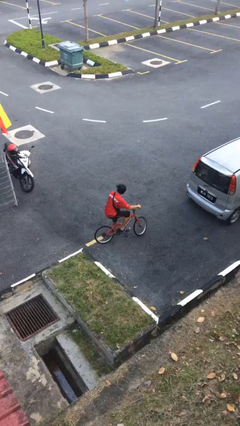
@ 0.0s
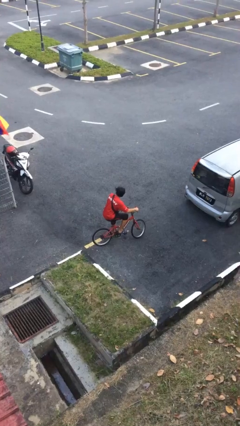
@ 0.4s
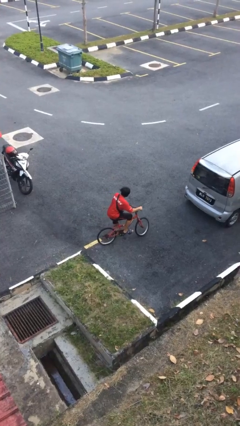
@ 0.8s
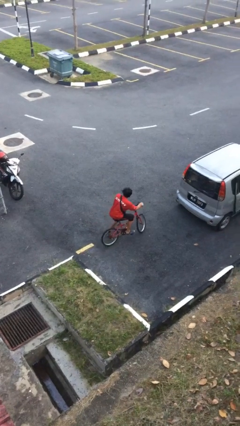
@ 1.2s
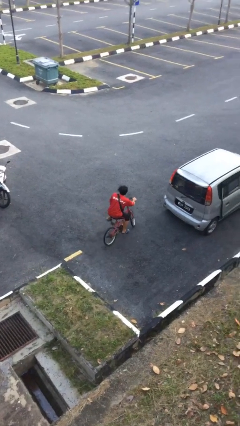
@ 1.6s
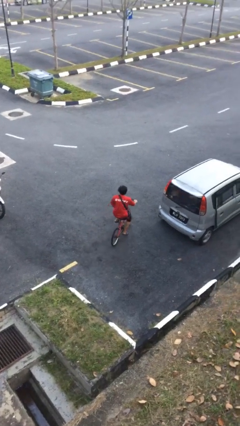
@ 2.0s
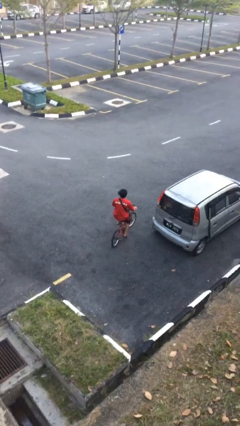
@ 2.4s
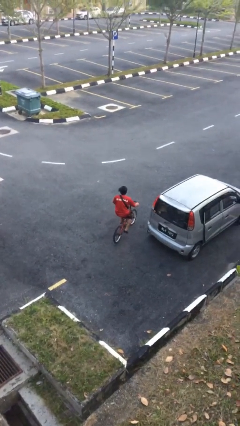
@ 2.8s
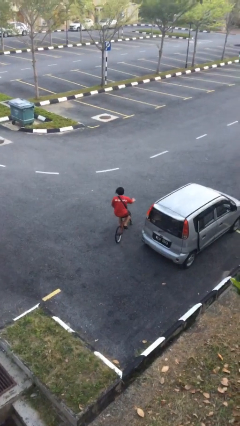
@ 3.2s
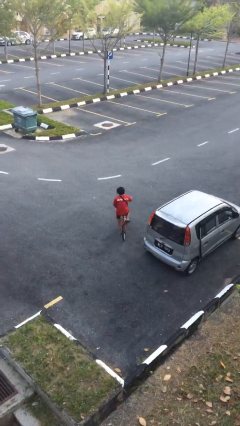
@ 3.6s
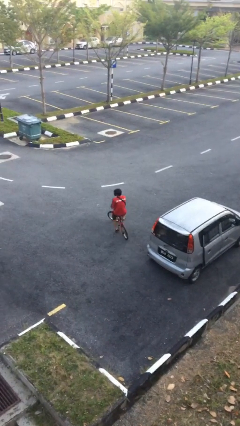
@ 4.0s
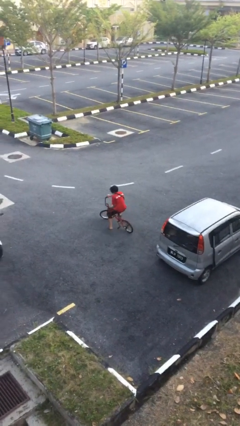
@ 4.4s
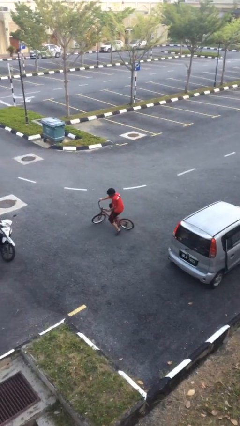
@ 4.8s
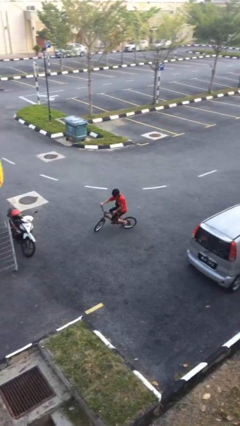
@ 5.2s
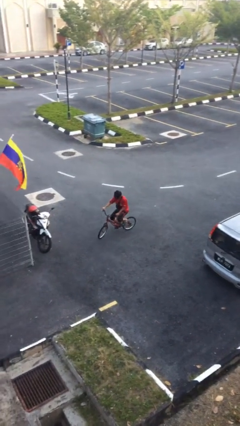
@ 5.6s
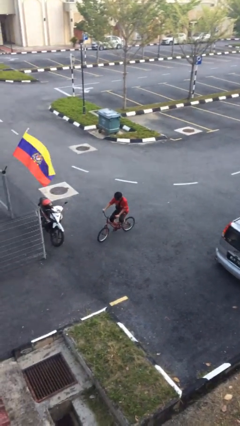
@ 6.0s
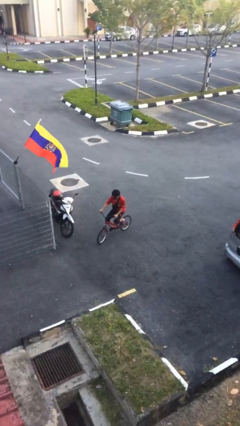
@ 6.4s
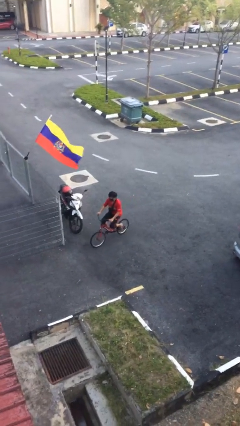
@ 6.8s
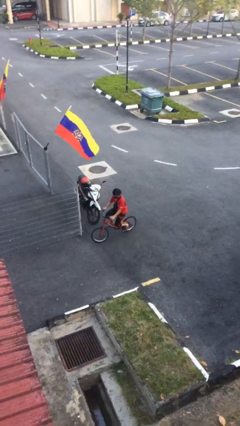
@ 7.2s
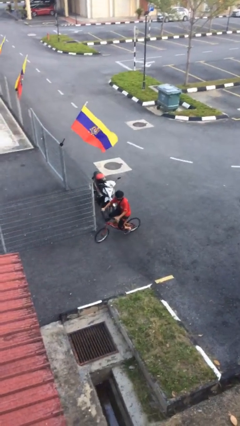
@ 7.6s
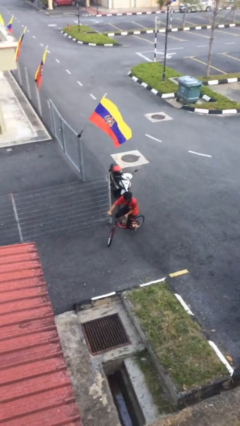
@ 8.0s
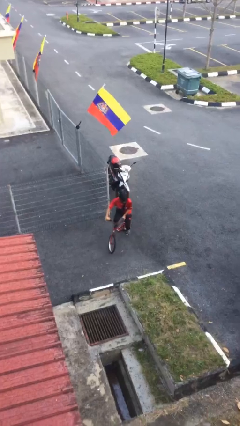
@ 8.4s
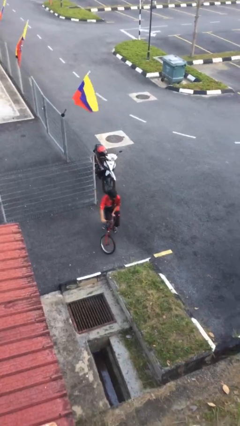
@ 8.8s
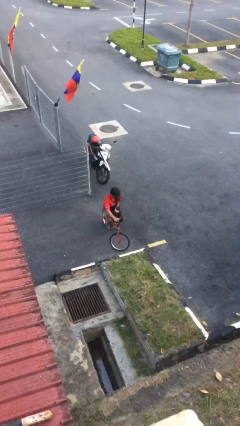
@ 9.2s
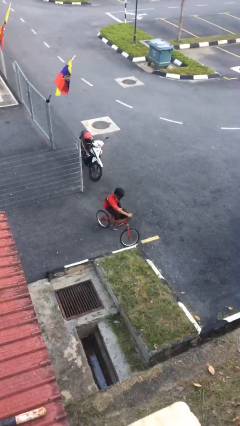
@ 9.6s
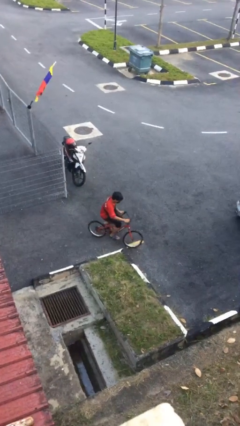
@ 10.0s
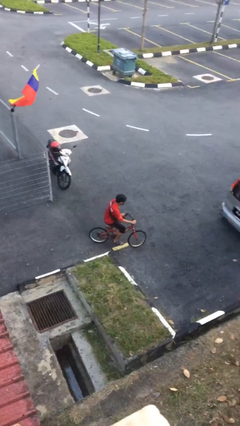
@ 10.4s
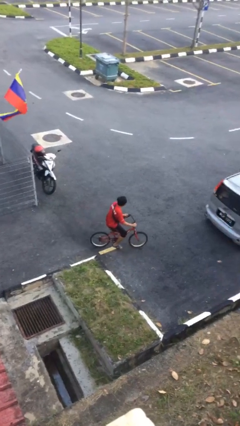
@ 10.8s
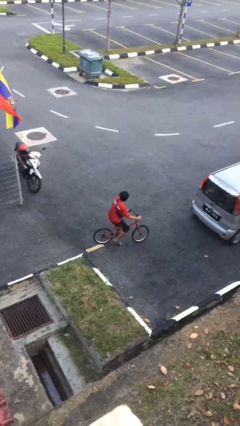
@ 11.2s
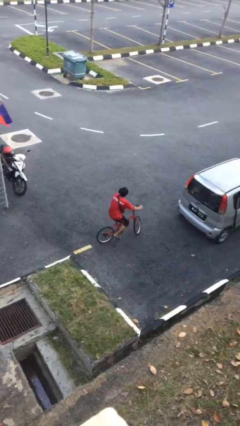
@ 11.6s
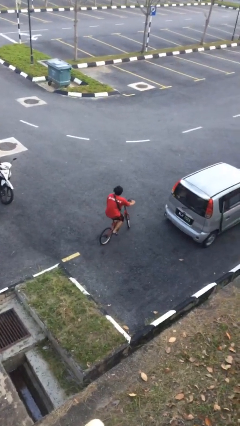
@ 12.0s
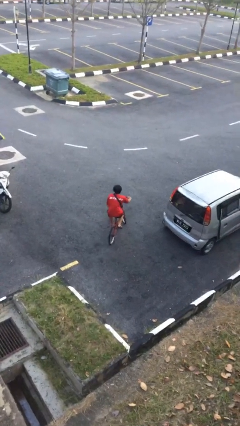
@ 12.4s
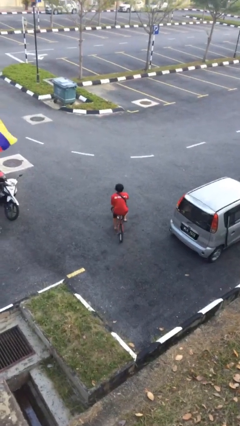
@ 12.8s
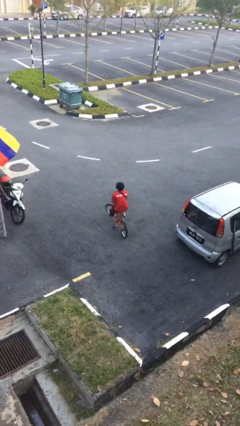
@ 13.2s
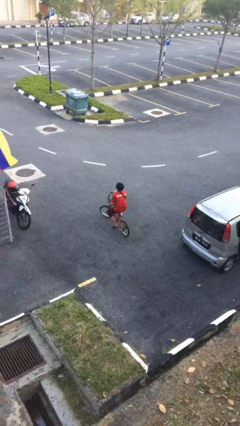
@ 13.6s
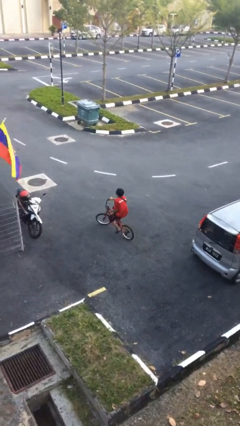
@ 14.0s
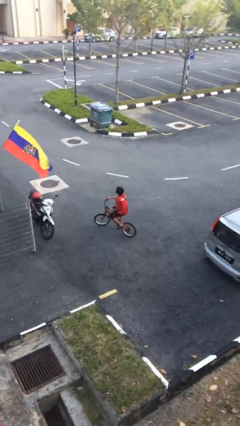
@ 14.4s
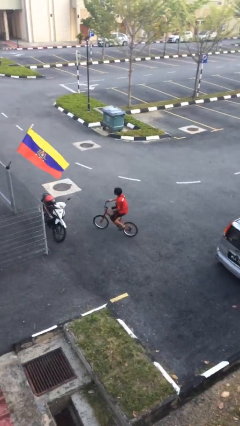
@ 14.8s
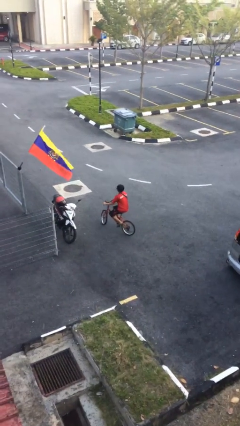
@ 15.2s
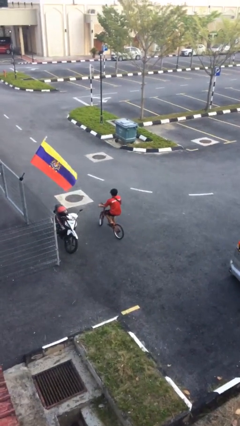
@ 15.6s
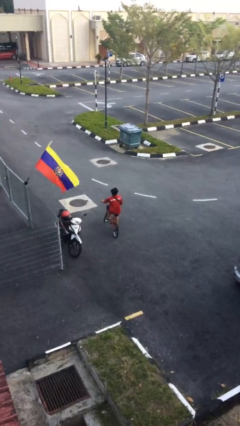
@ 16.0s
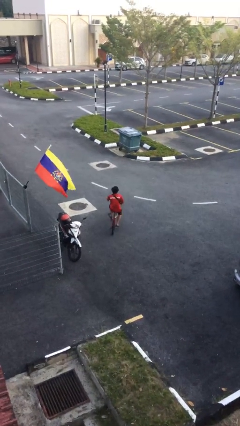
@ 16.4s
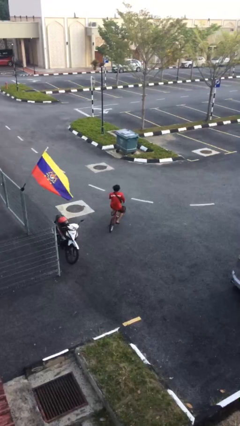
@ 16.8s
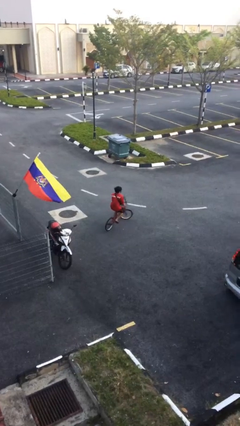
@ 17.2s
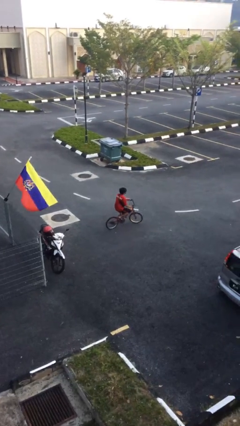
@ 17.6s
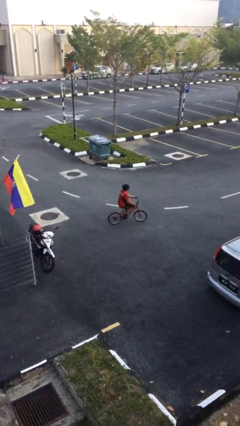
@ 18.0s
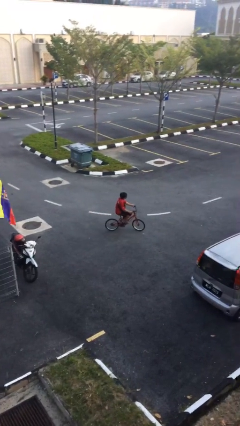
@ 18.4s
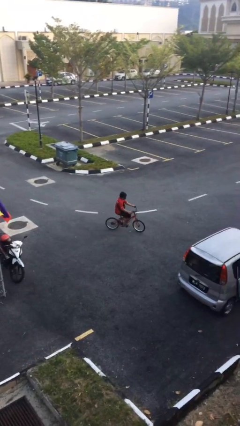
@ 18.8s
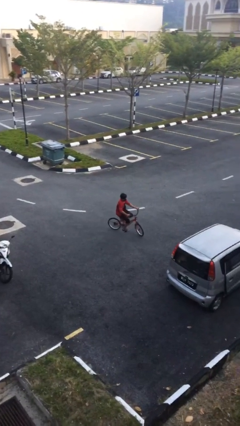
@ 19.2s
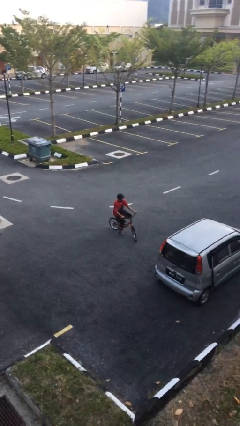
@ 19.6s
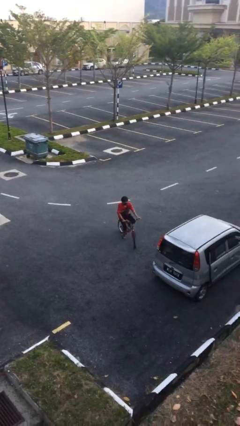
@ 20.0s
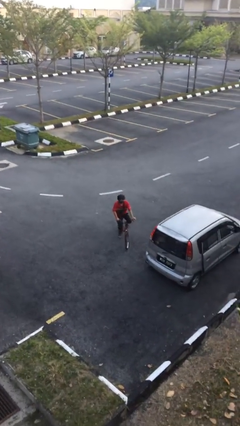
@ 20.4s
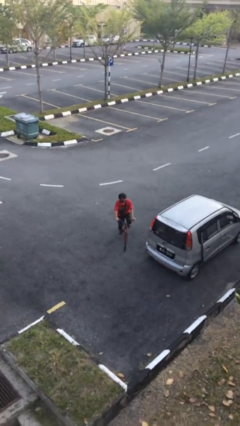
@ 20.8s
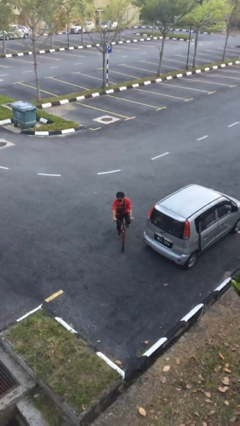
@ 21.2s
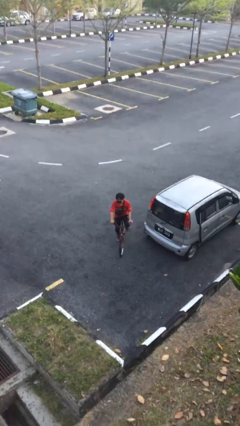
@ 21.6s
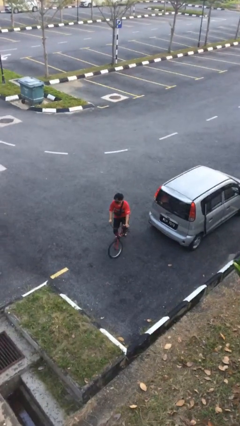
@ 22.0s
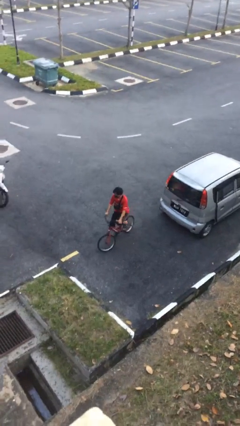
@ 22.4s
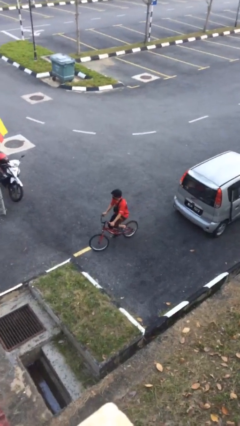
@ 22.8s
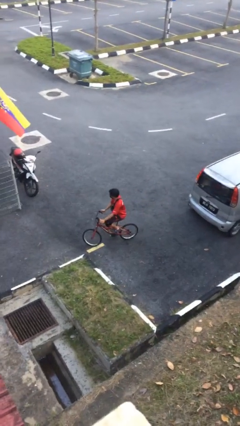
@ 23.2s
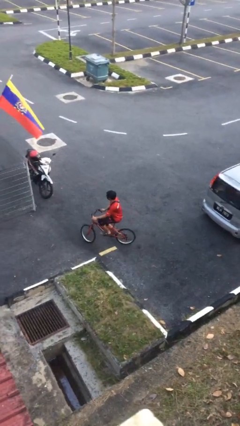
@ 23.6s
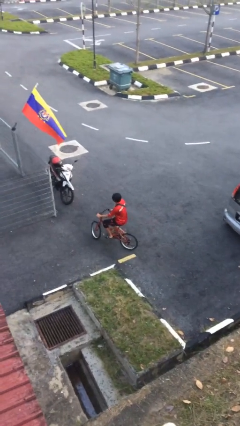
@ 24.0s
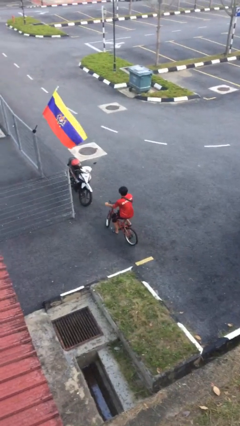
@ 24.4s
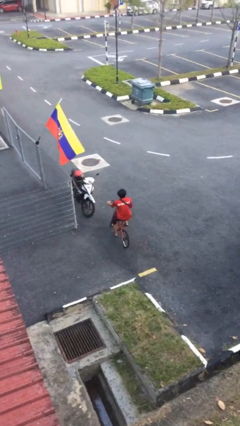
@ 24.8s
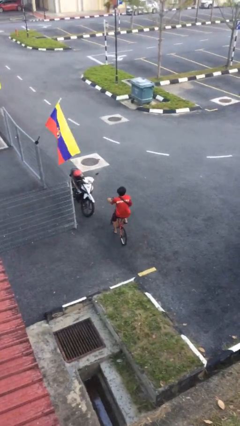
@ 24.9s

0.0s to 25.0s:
person rides bicycle

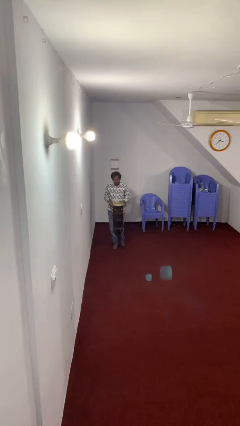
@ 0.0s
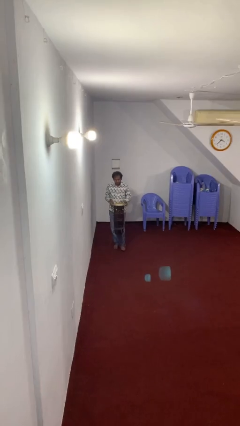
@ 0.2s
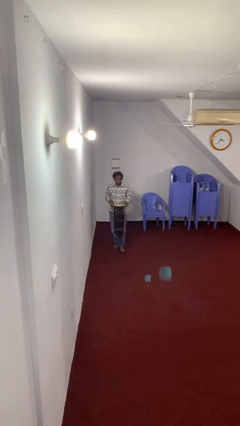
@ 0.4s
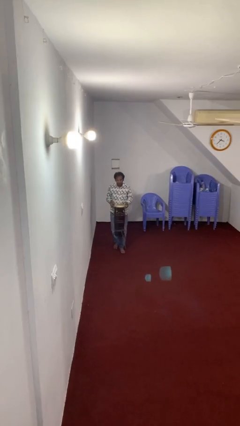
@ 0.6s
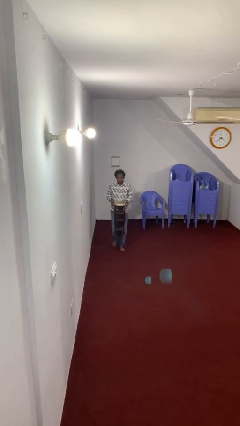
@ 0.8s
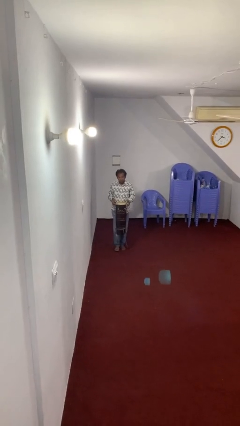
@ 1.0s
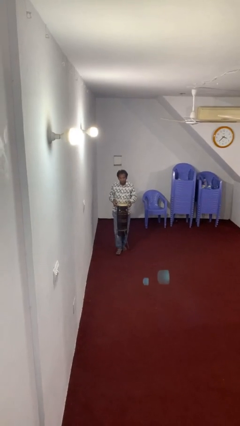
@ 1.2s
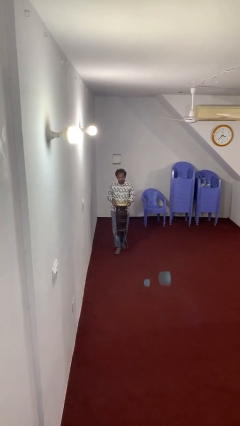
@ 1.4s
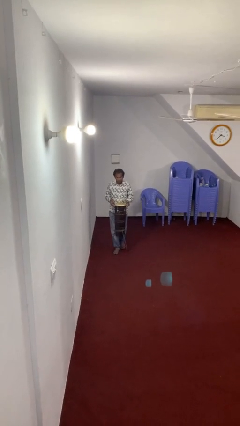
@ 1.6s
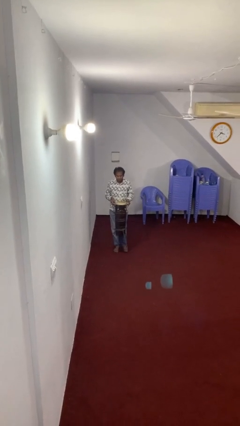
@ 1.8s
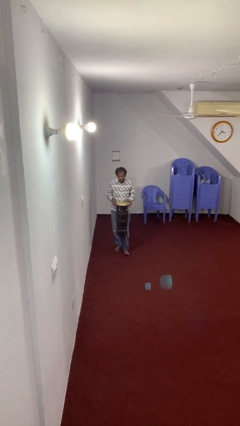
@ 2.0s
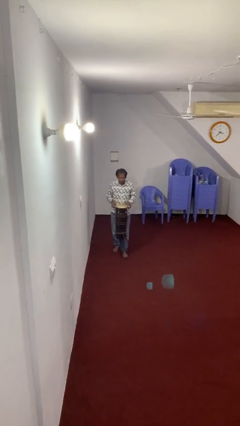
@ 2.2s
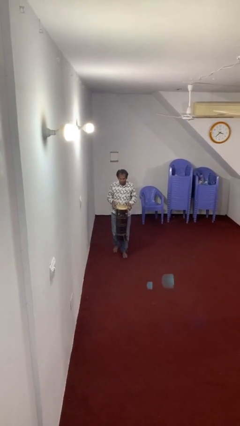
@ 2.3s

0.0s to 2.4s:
person carries heavy object

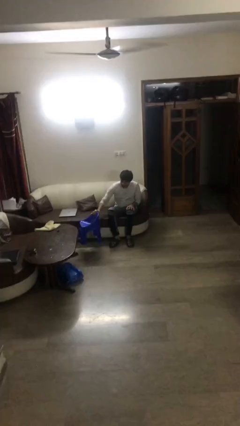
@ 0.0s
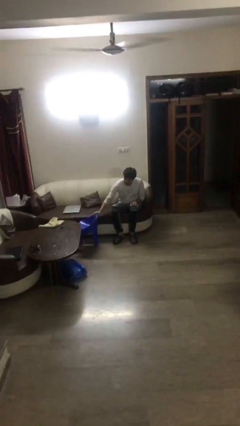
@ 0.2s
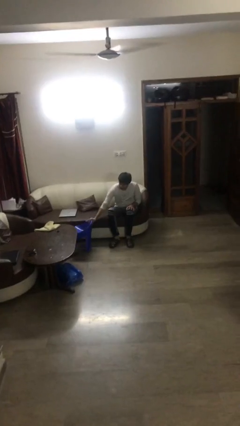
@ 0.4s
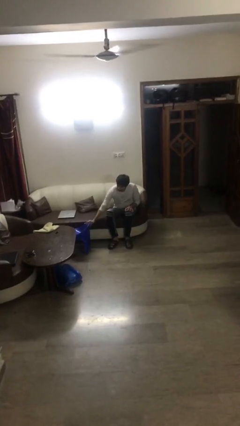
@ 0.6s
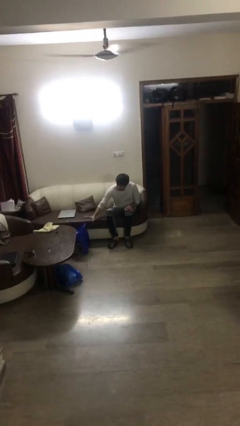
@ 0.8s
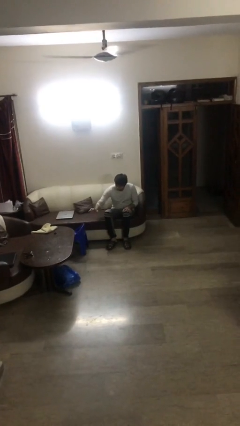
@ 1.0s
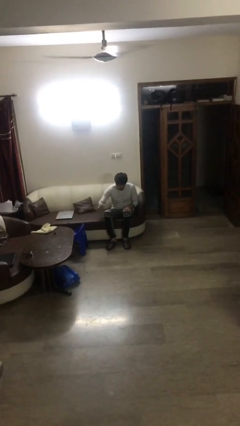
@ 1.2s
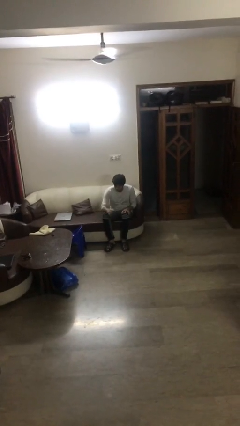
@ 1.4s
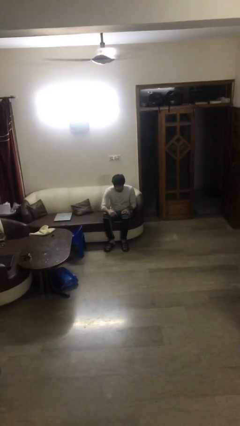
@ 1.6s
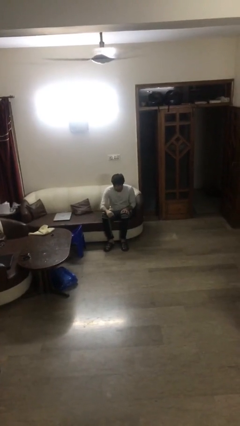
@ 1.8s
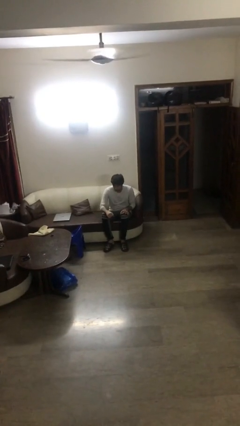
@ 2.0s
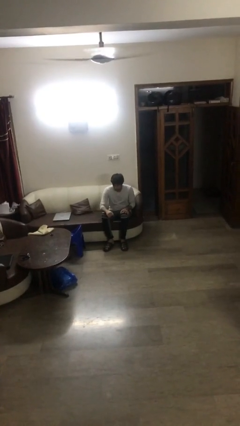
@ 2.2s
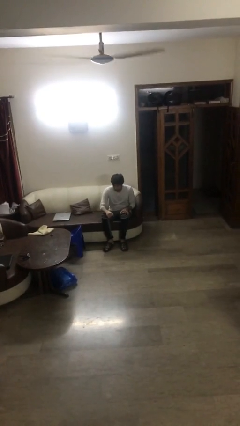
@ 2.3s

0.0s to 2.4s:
person puts down object on floor

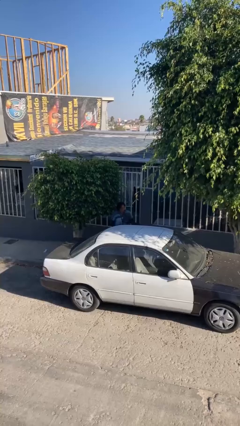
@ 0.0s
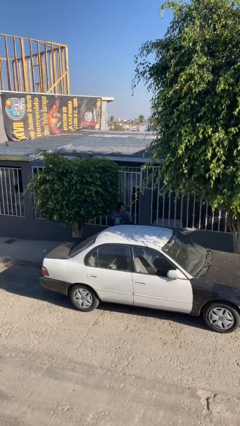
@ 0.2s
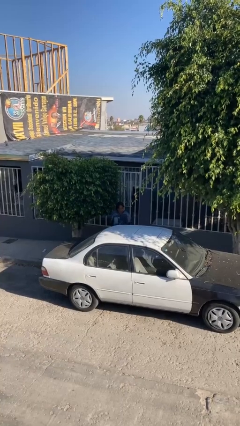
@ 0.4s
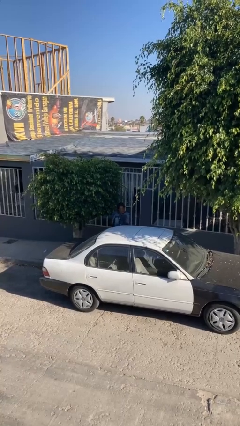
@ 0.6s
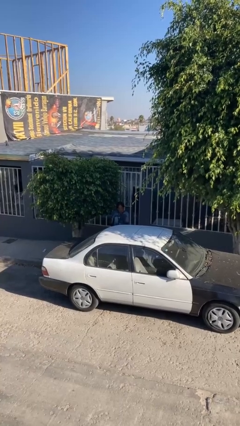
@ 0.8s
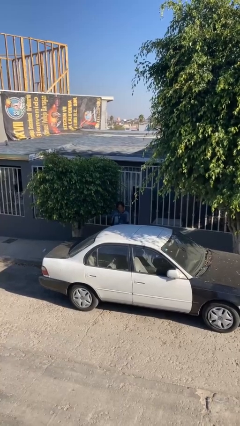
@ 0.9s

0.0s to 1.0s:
person closes car door
